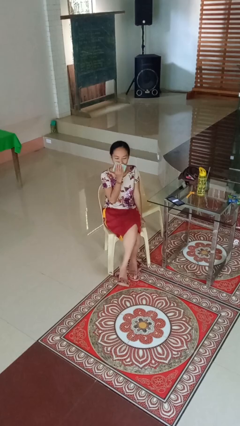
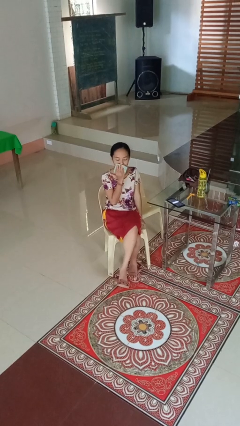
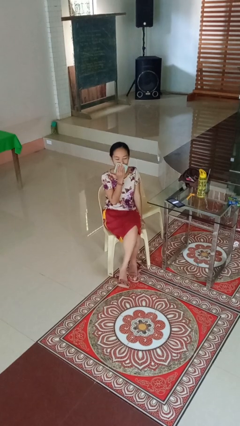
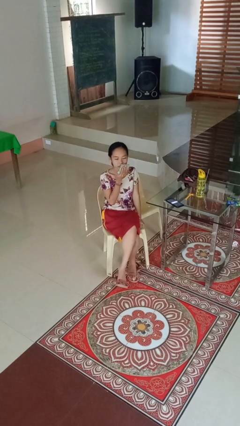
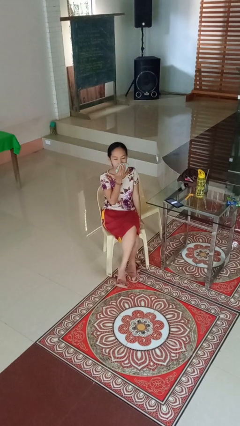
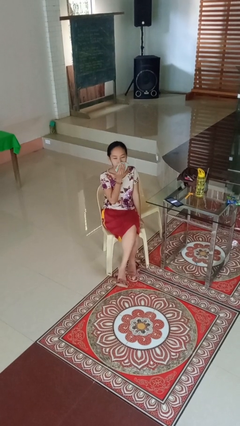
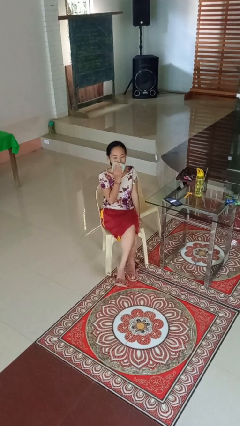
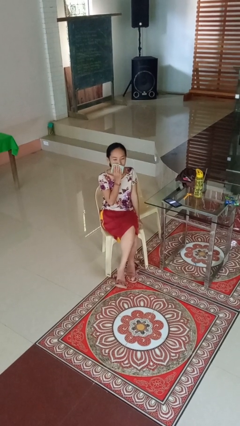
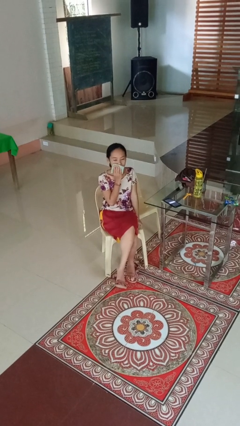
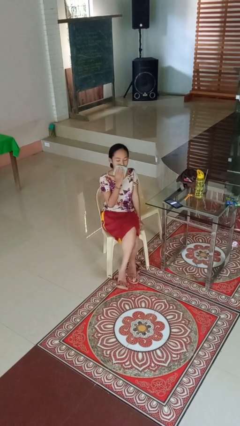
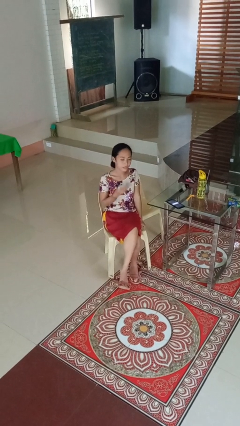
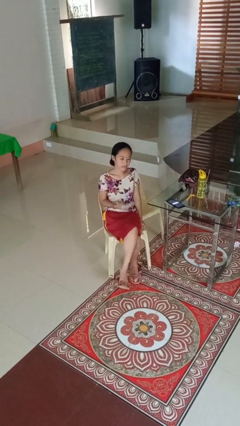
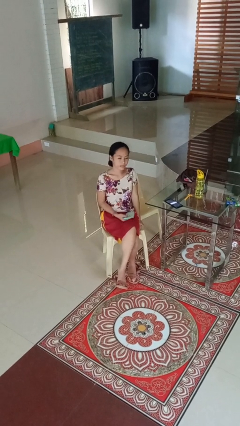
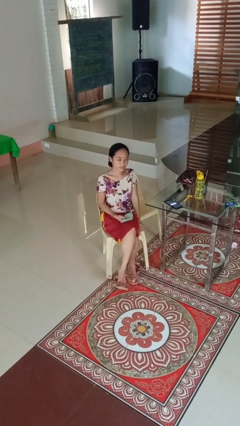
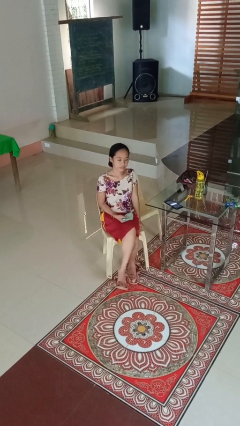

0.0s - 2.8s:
person wipes mouth with napkin

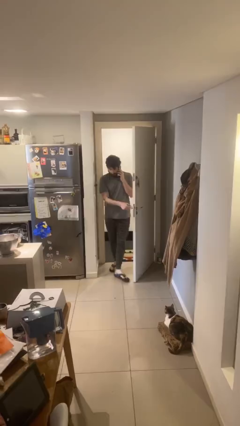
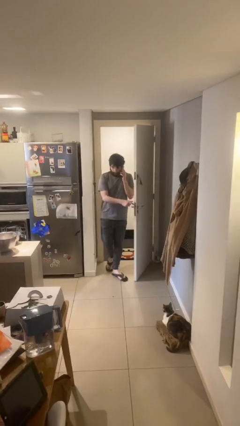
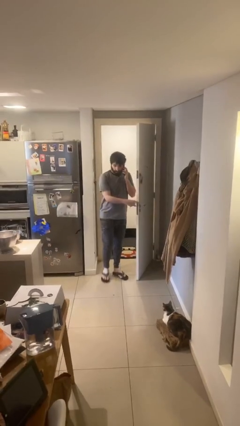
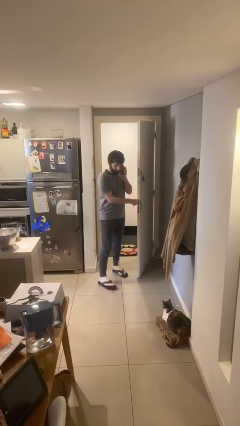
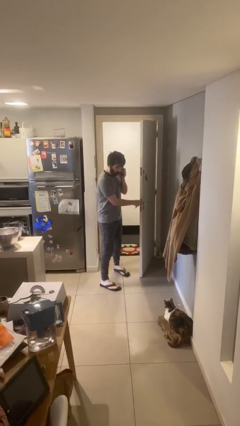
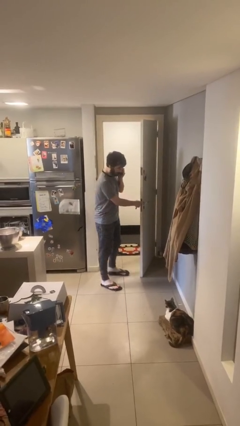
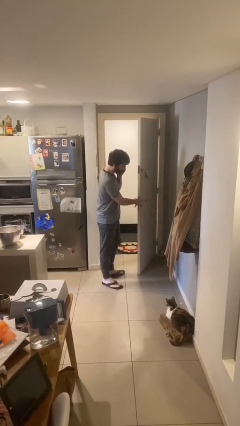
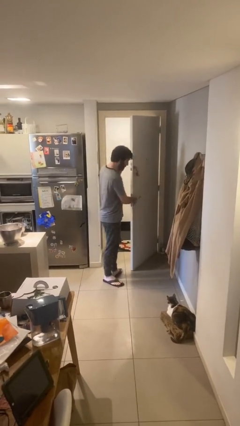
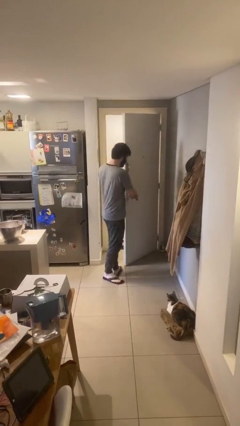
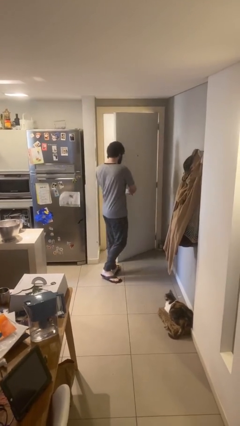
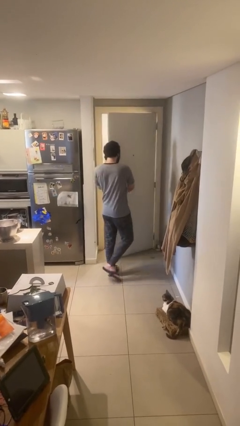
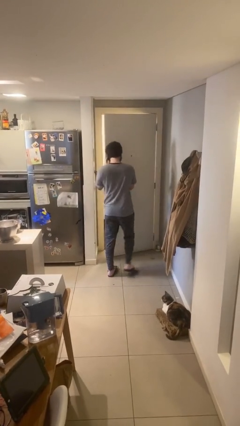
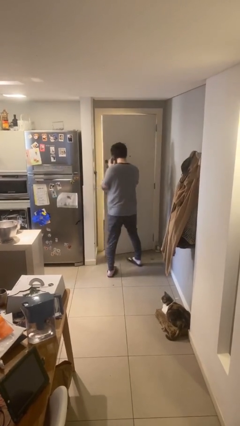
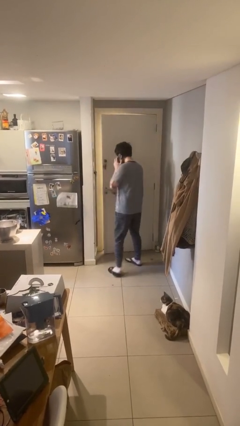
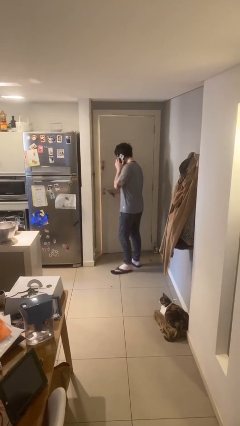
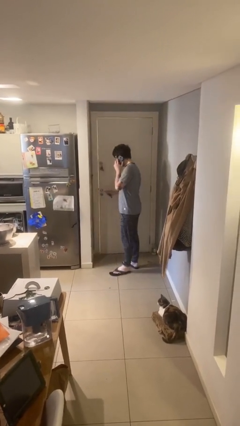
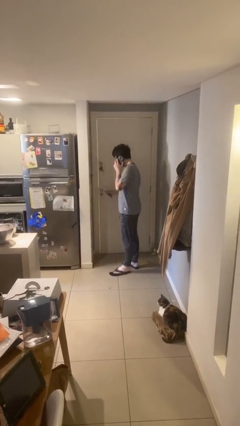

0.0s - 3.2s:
person enters scene through structure

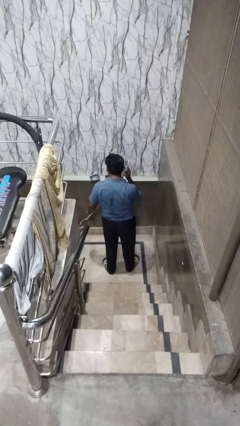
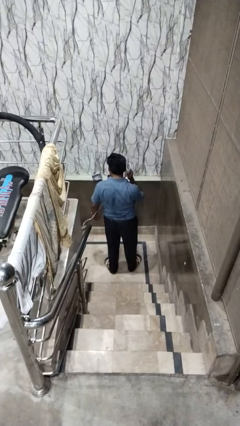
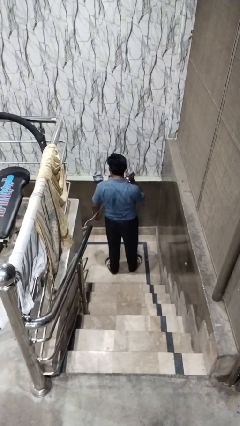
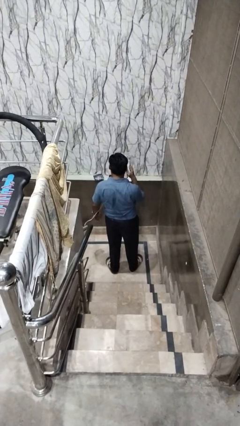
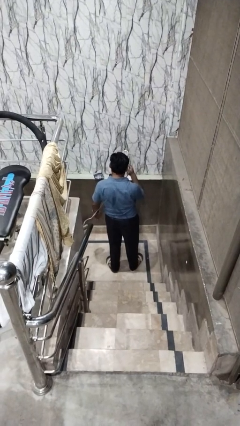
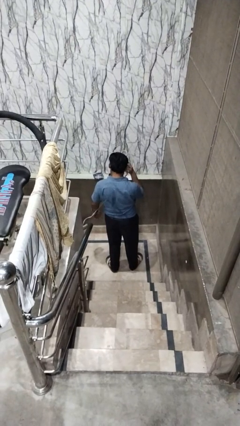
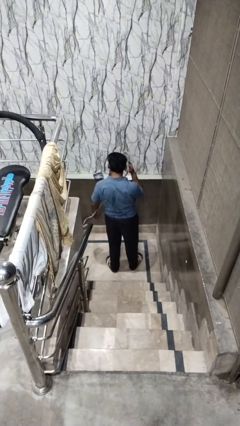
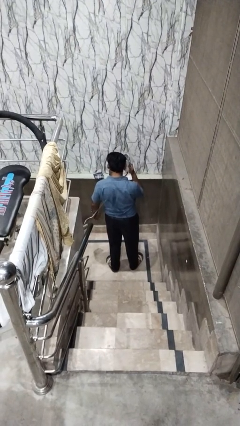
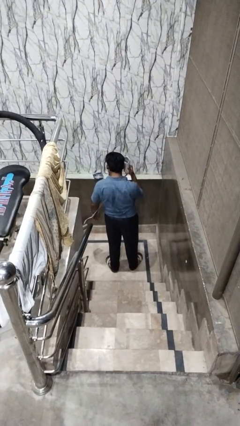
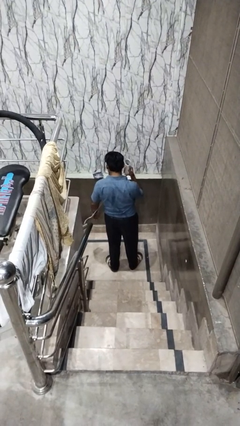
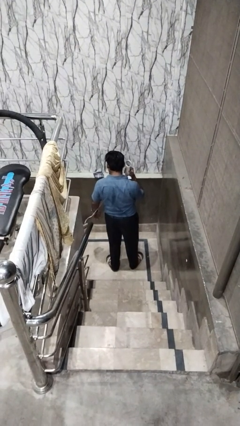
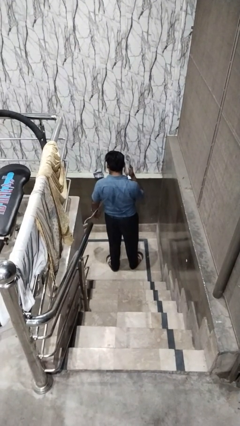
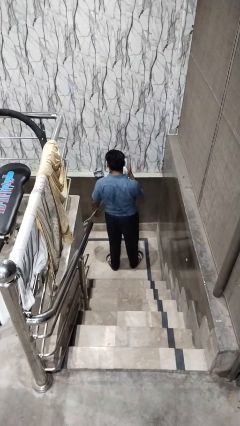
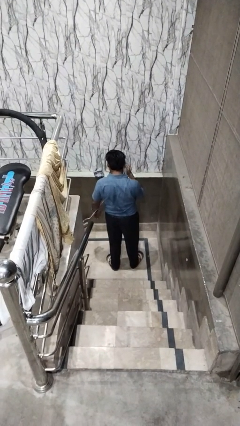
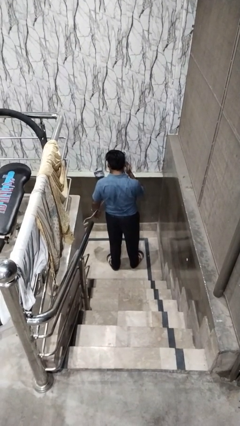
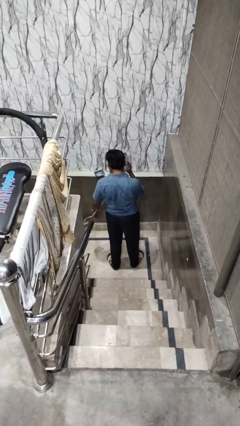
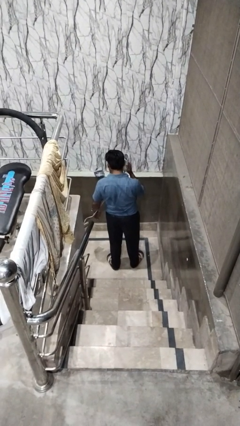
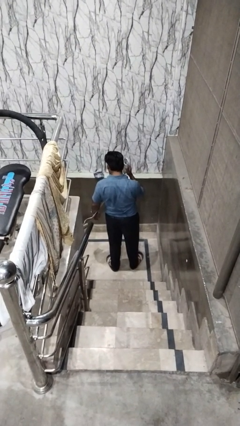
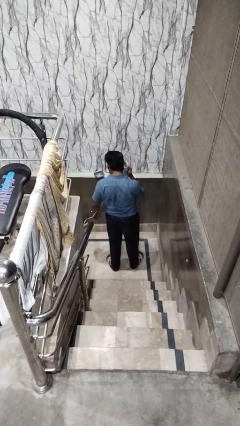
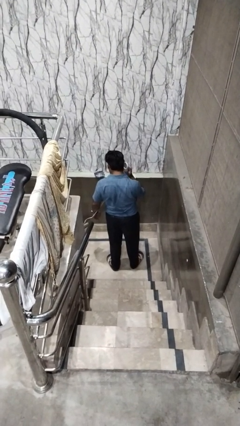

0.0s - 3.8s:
person dries hair with hairdryer

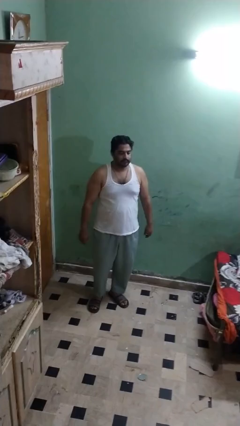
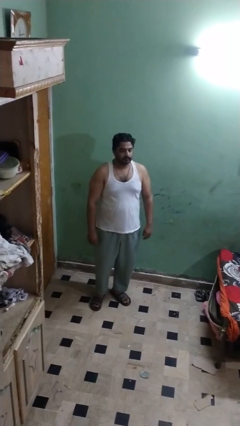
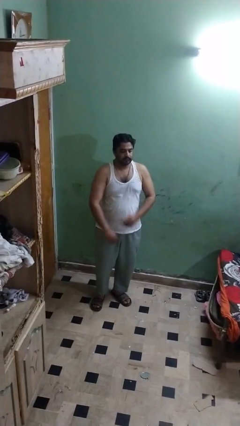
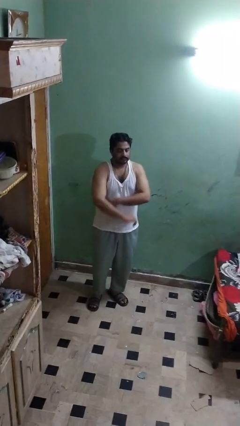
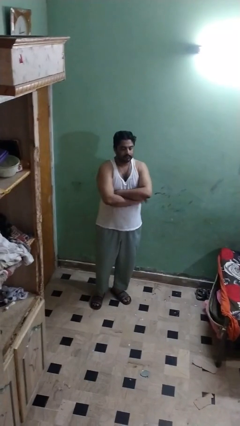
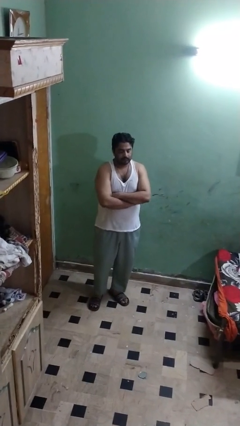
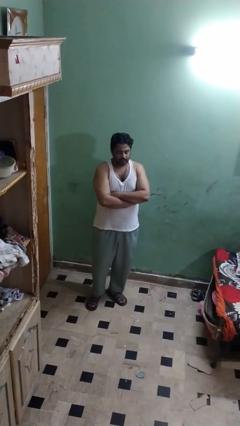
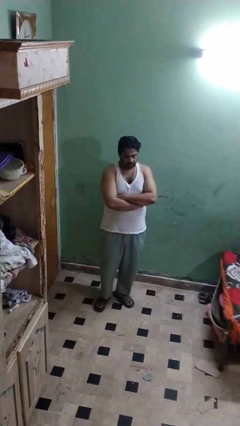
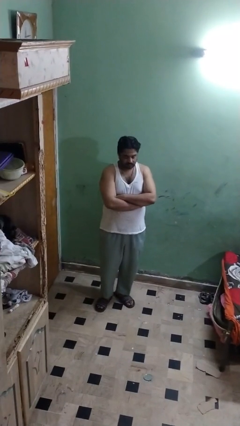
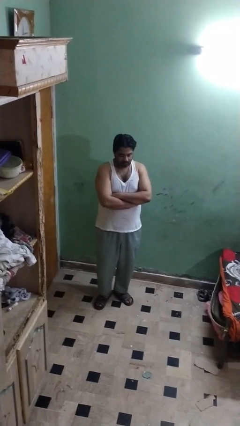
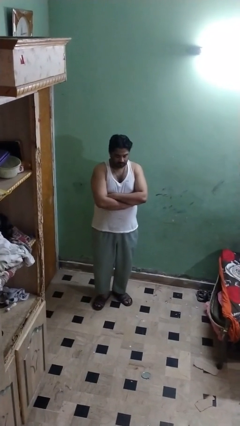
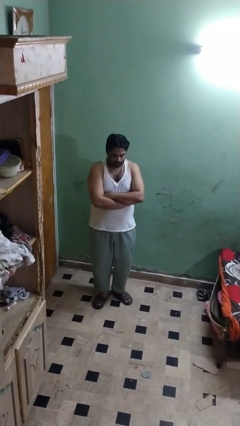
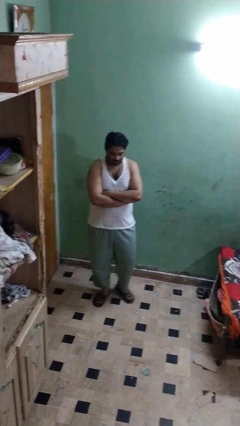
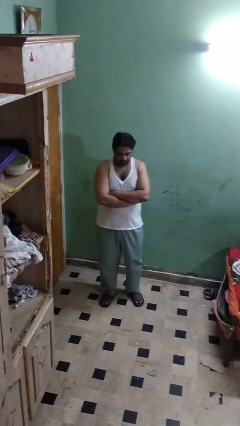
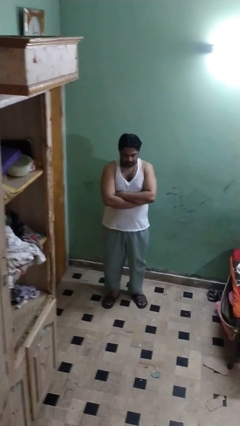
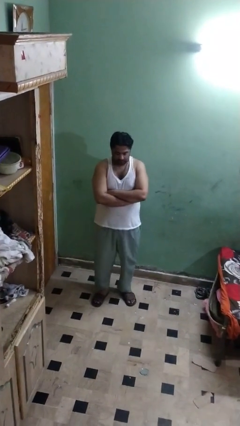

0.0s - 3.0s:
person crosses arms

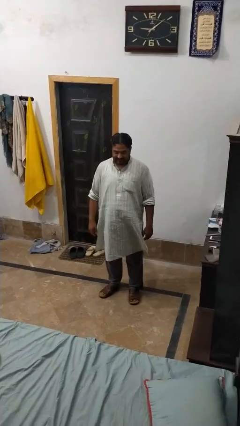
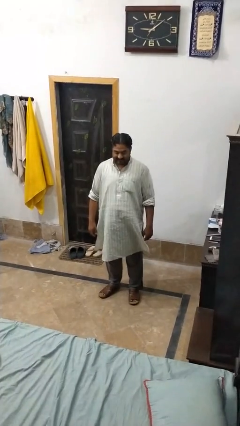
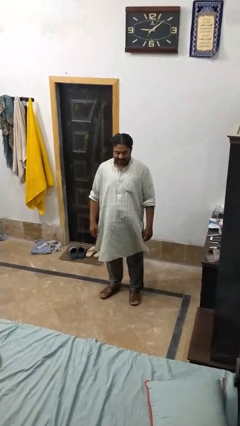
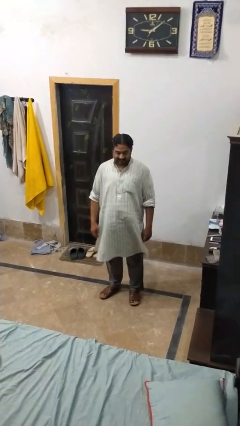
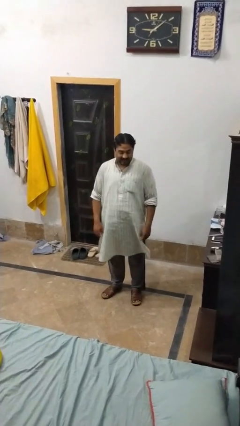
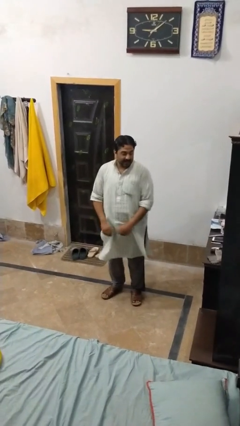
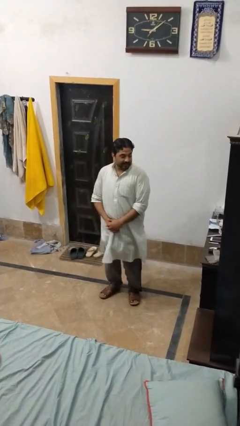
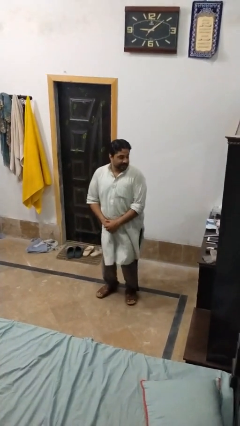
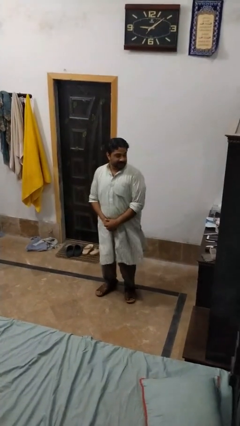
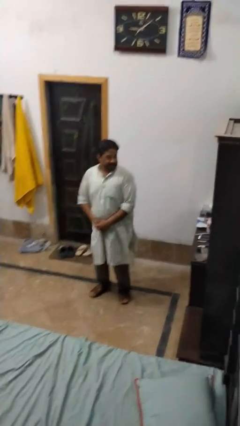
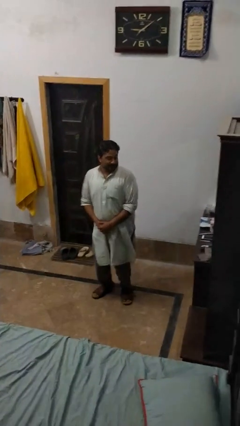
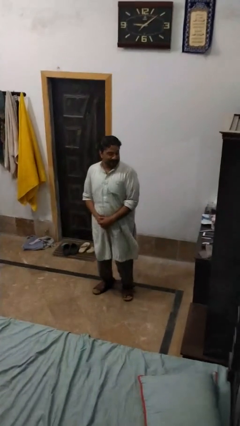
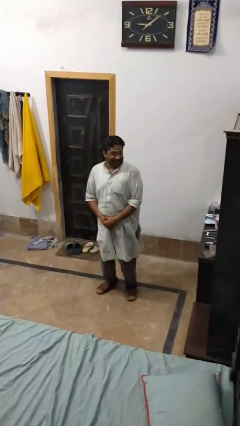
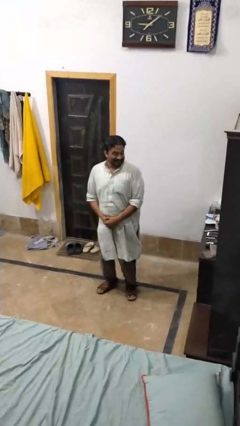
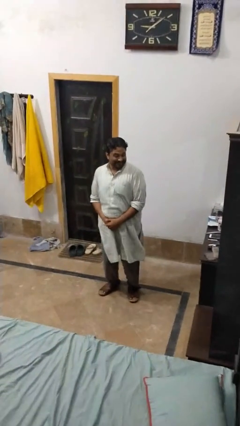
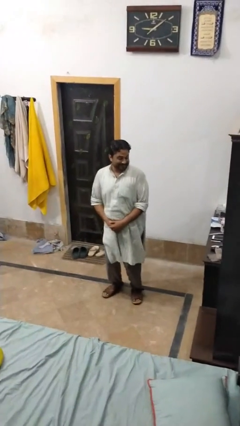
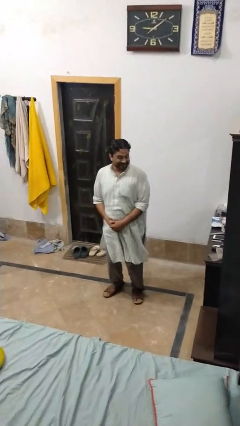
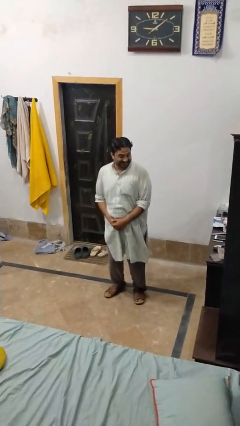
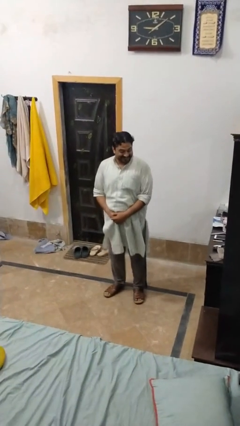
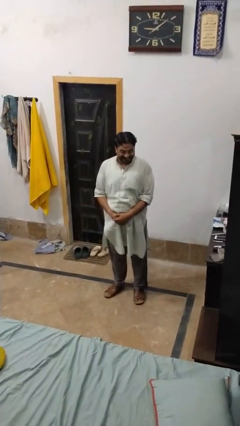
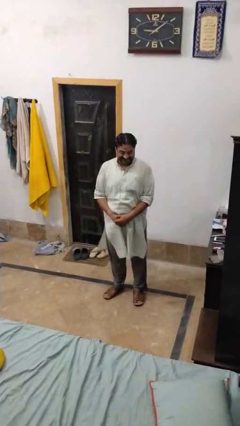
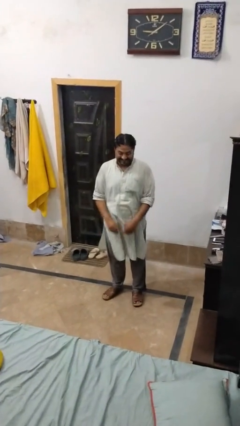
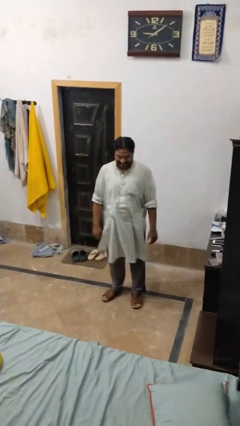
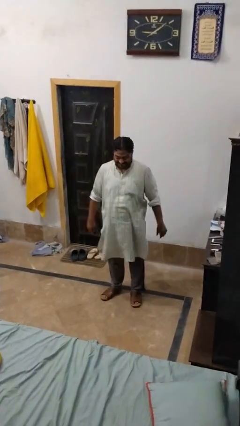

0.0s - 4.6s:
person wiggles hips
